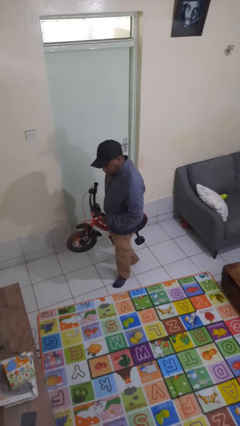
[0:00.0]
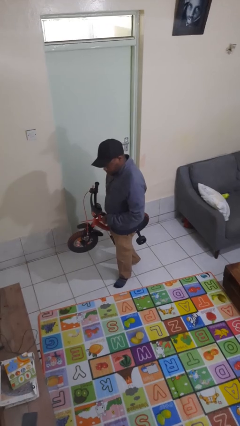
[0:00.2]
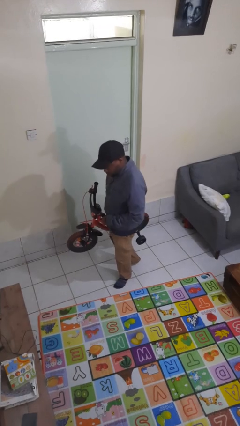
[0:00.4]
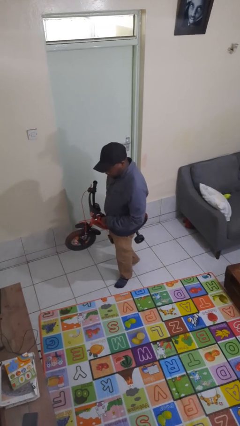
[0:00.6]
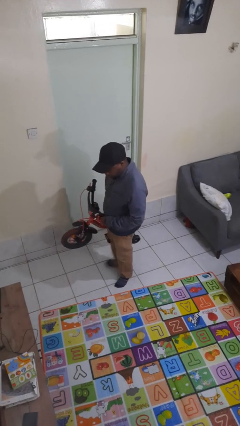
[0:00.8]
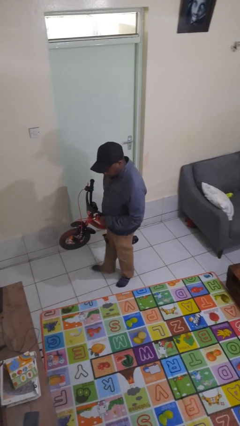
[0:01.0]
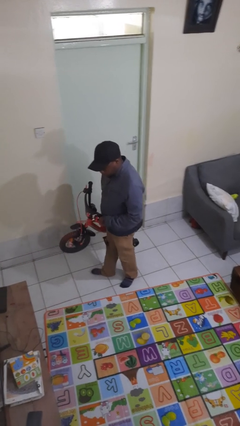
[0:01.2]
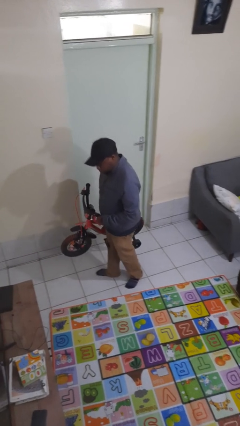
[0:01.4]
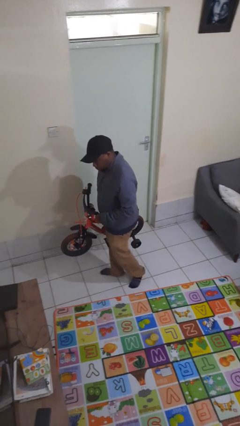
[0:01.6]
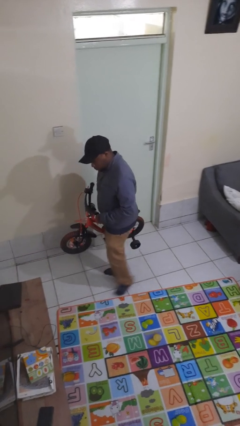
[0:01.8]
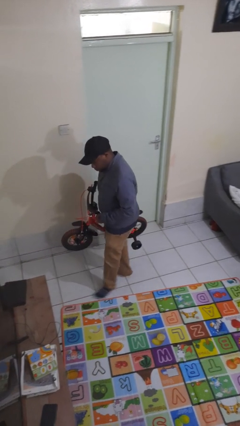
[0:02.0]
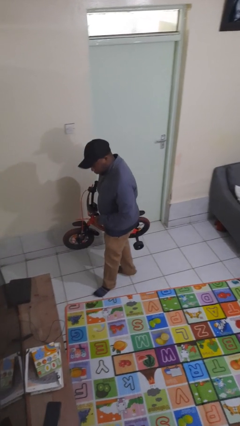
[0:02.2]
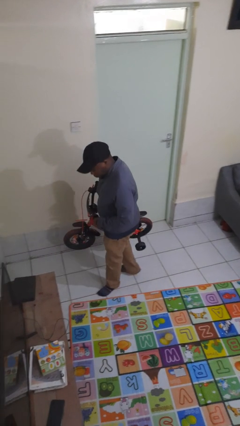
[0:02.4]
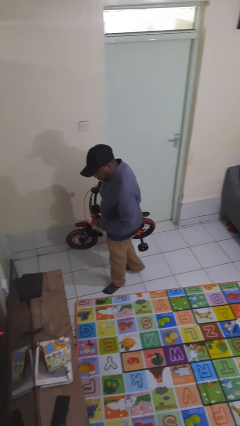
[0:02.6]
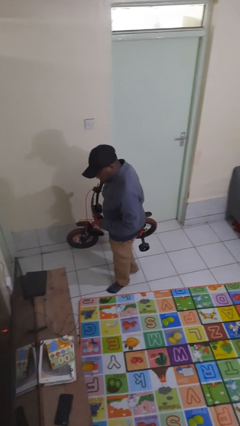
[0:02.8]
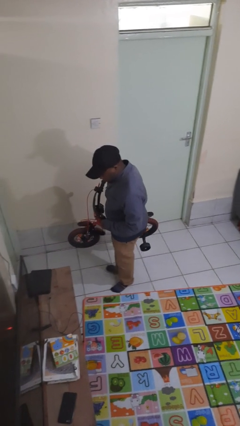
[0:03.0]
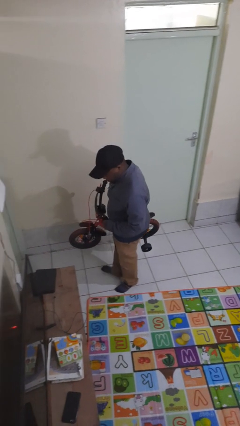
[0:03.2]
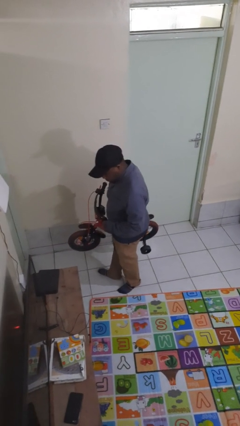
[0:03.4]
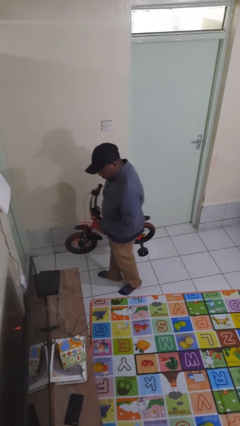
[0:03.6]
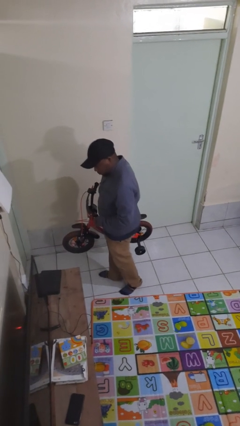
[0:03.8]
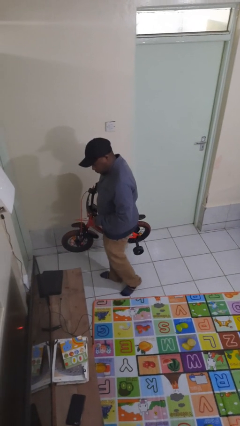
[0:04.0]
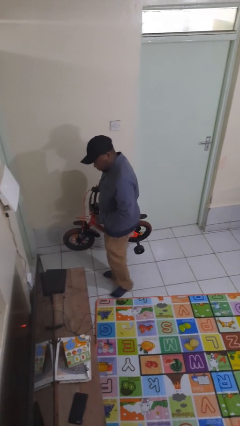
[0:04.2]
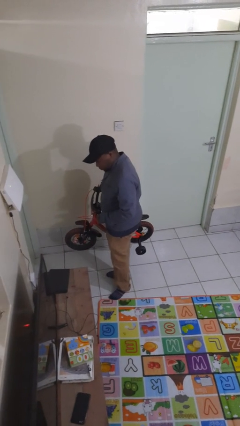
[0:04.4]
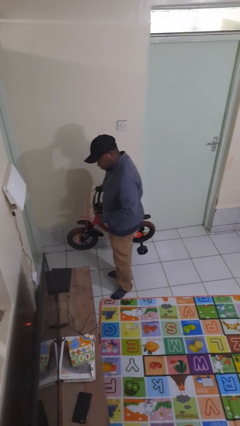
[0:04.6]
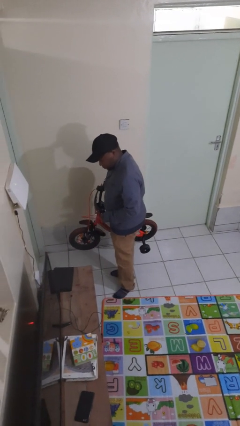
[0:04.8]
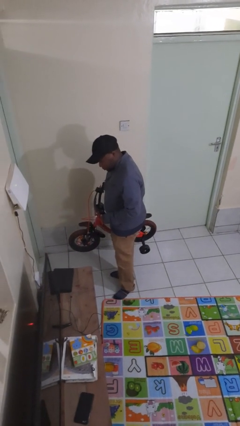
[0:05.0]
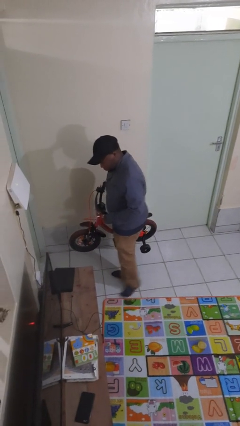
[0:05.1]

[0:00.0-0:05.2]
person carries bicycle

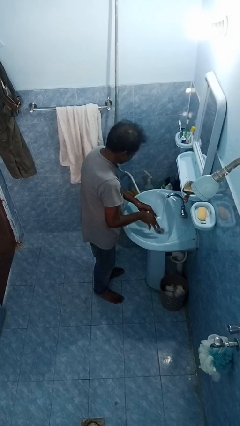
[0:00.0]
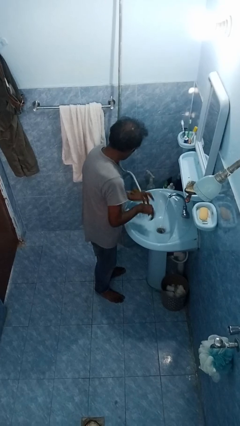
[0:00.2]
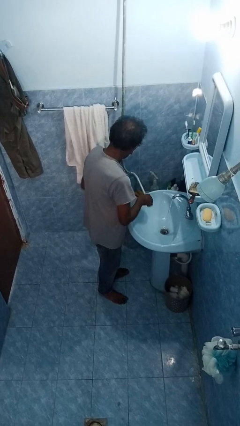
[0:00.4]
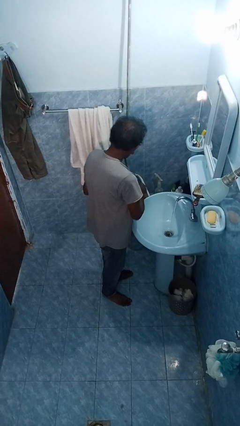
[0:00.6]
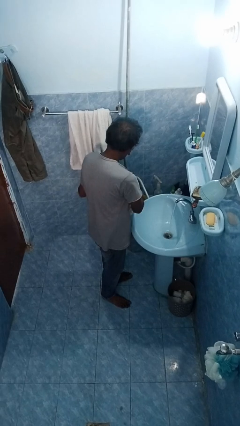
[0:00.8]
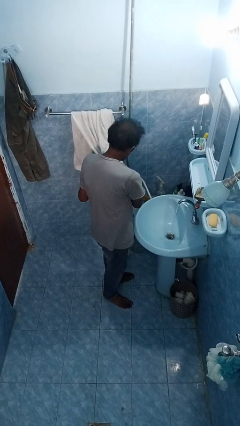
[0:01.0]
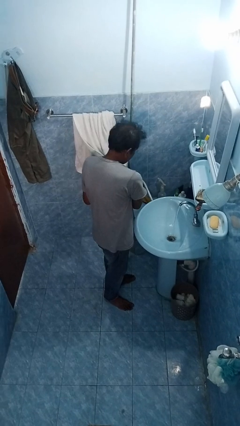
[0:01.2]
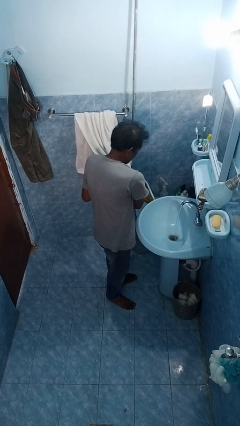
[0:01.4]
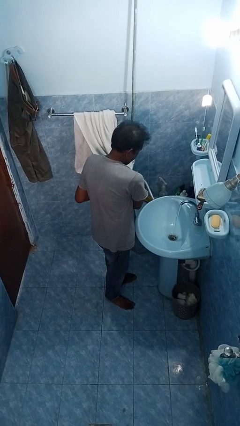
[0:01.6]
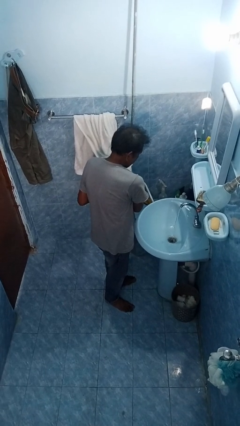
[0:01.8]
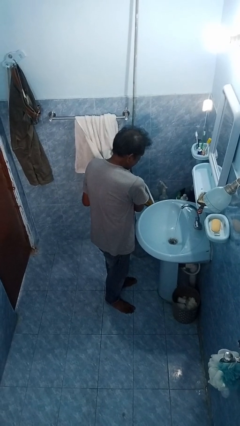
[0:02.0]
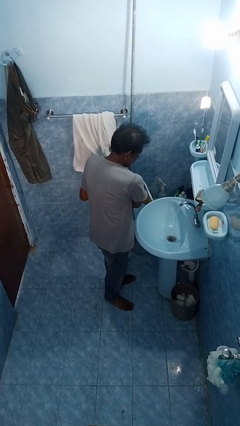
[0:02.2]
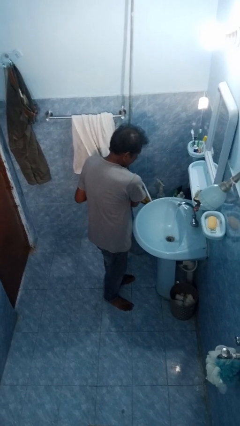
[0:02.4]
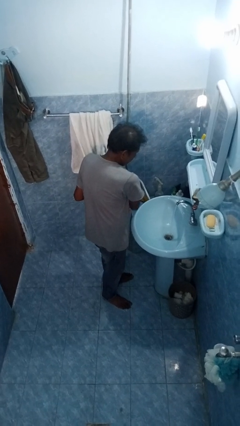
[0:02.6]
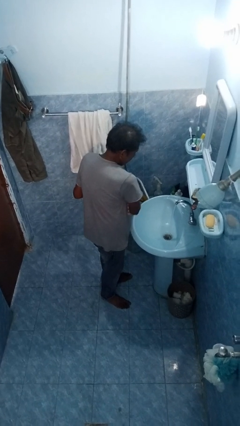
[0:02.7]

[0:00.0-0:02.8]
person dries hands with towel

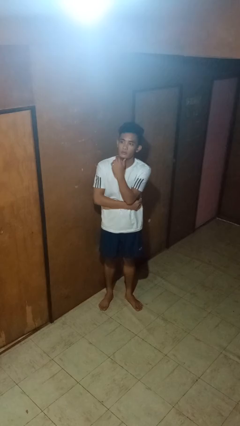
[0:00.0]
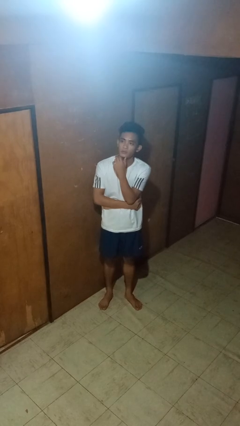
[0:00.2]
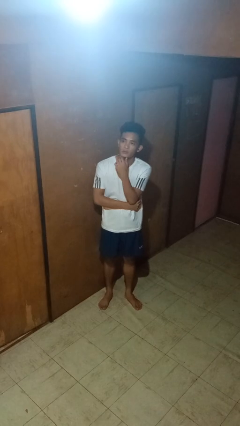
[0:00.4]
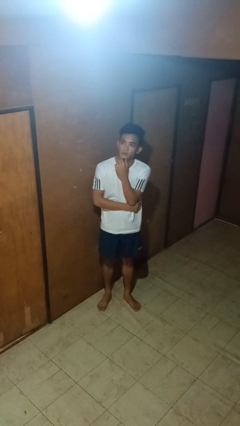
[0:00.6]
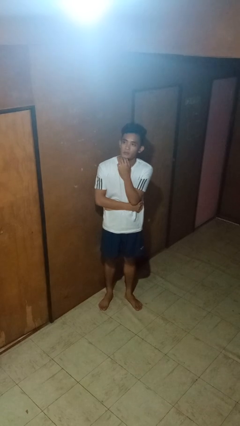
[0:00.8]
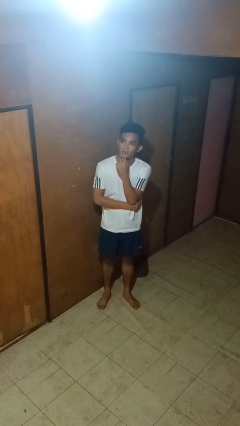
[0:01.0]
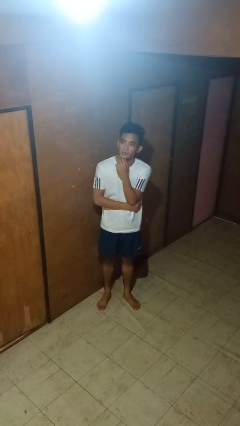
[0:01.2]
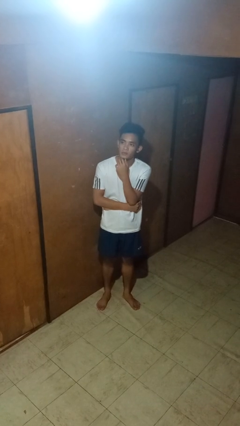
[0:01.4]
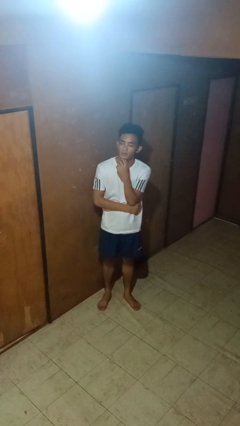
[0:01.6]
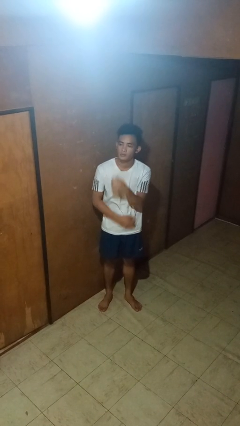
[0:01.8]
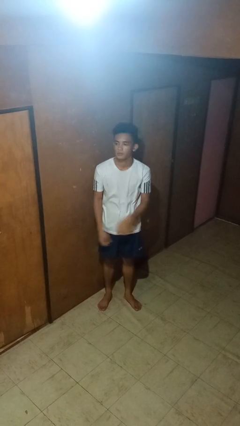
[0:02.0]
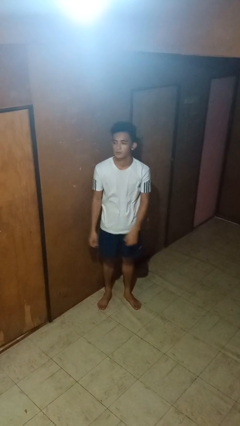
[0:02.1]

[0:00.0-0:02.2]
person strokes chin

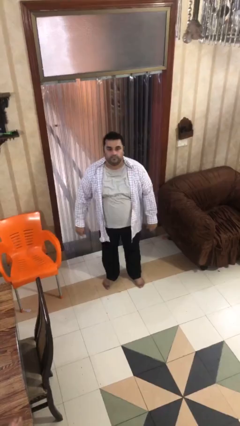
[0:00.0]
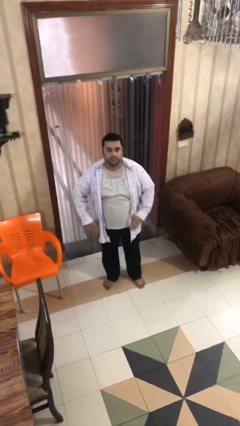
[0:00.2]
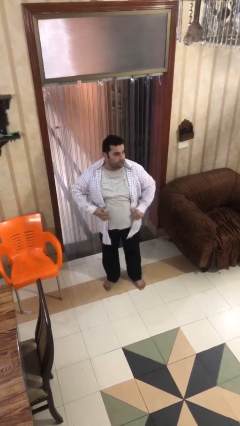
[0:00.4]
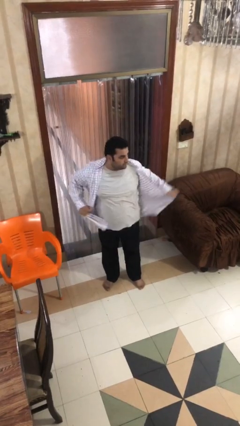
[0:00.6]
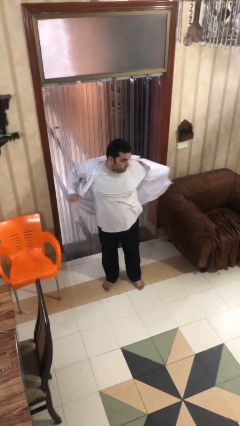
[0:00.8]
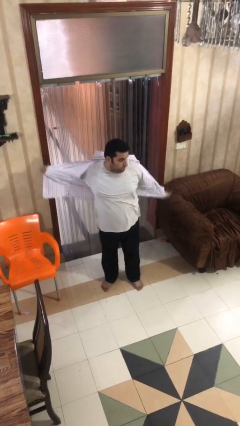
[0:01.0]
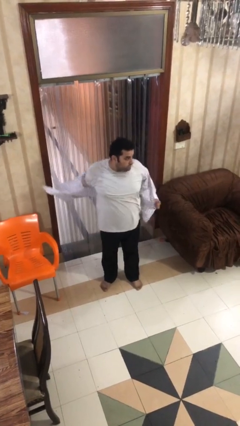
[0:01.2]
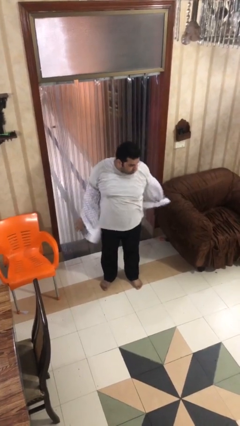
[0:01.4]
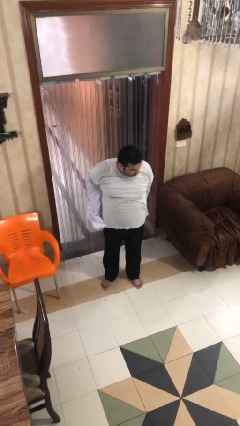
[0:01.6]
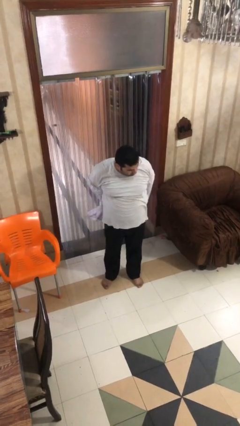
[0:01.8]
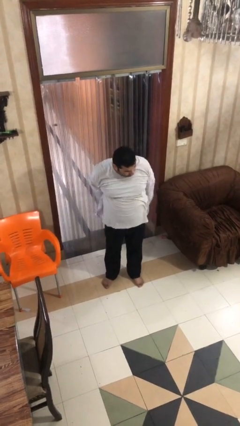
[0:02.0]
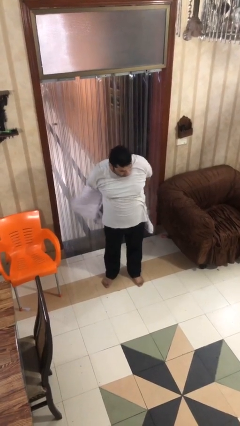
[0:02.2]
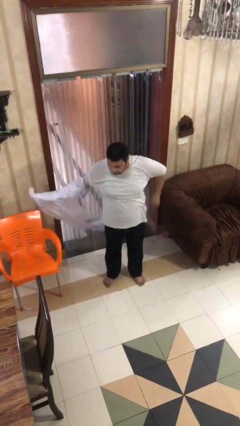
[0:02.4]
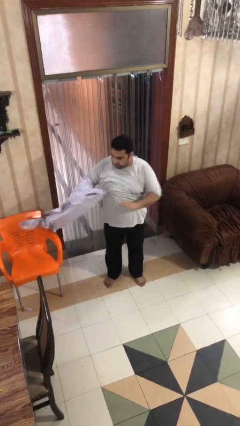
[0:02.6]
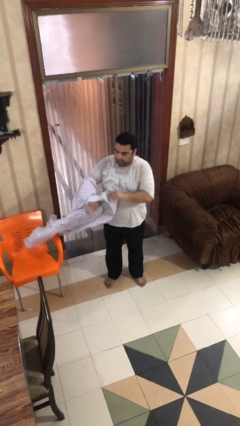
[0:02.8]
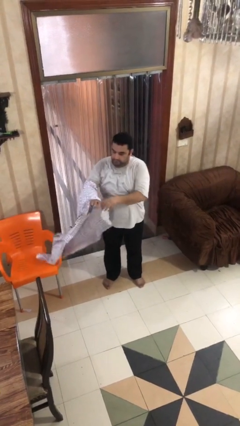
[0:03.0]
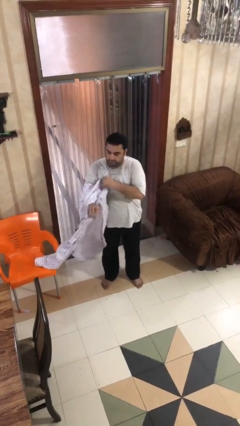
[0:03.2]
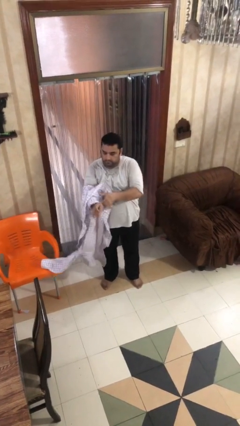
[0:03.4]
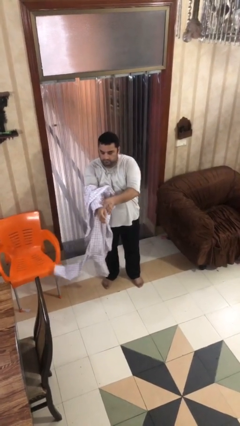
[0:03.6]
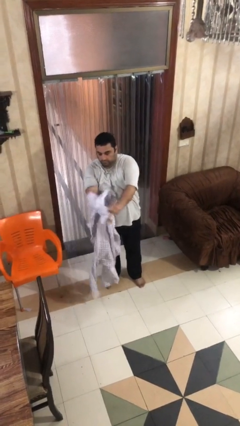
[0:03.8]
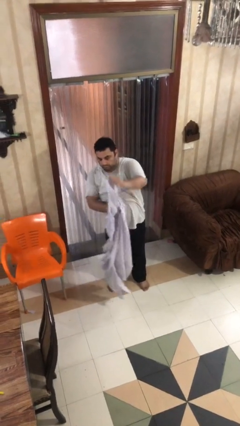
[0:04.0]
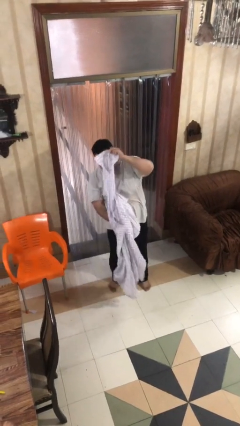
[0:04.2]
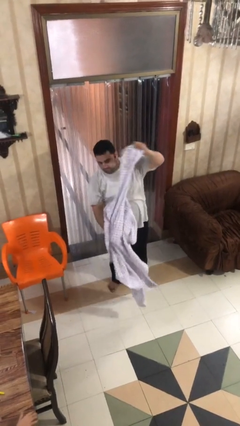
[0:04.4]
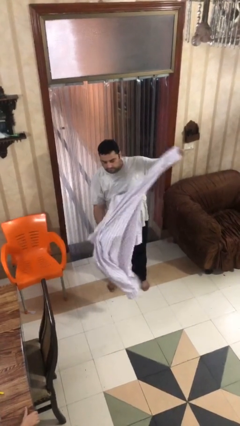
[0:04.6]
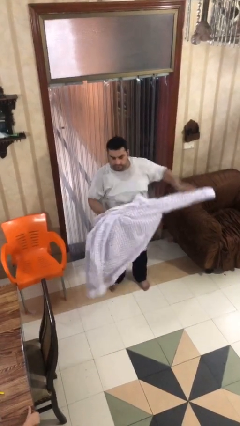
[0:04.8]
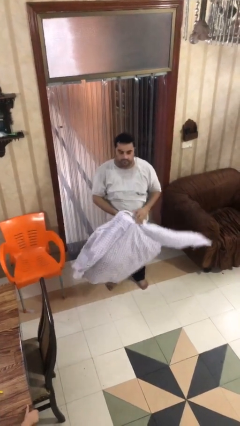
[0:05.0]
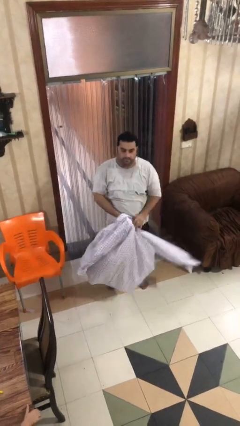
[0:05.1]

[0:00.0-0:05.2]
person takes off shirt

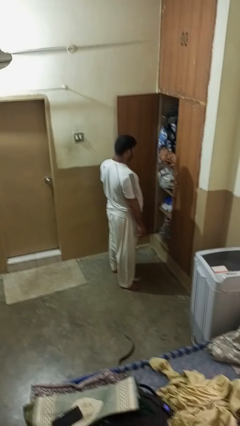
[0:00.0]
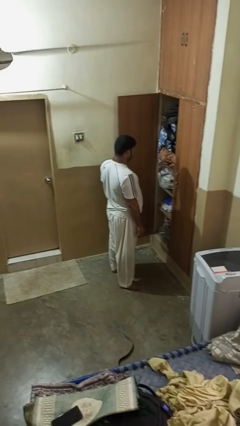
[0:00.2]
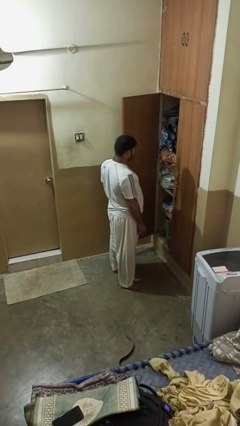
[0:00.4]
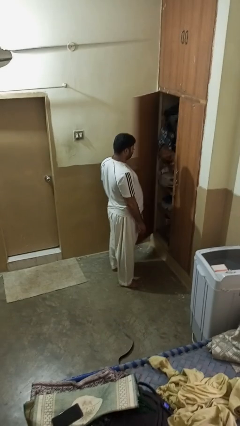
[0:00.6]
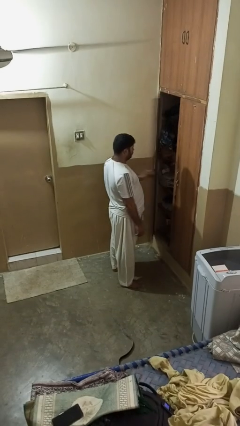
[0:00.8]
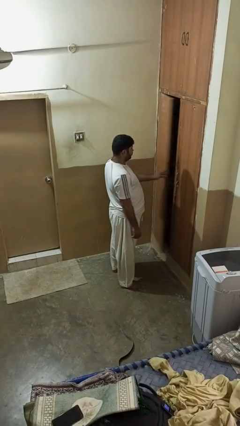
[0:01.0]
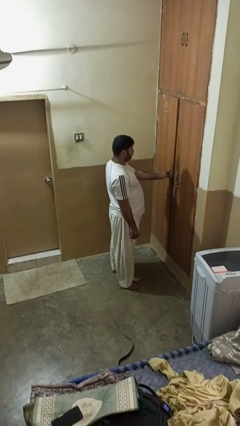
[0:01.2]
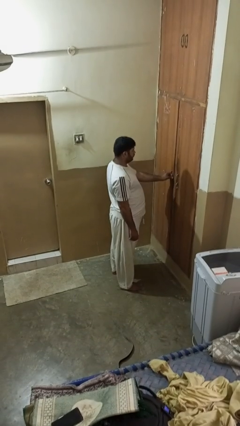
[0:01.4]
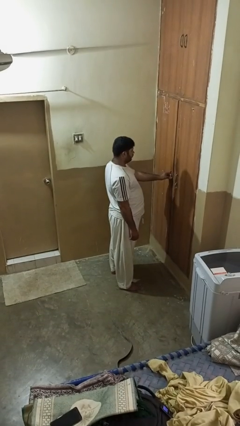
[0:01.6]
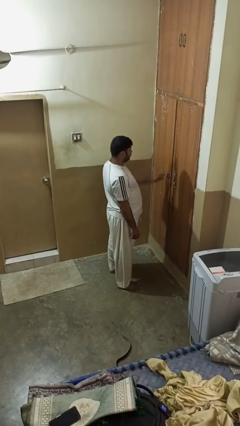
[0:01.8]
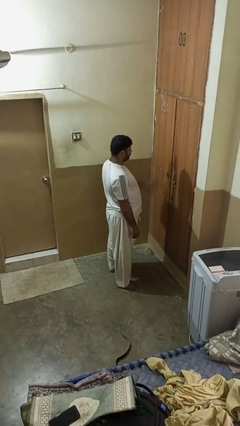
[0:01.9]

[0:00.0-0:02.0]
person closes closet door

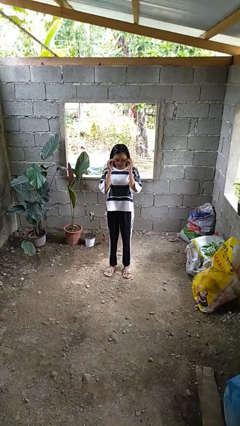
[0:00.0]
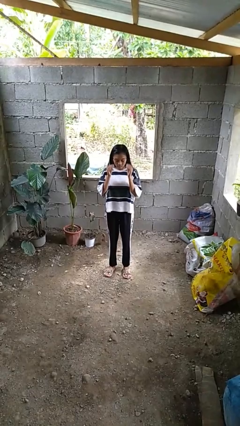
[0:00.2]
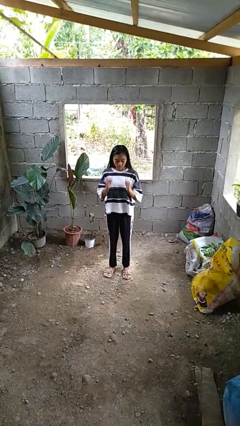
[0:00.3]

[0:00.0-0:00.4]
person takes off glasses
